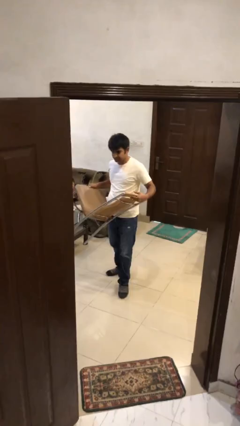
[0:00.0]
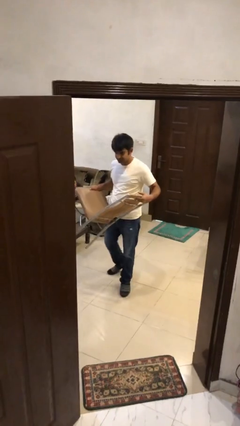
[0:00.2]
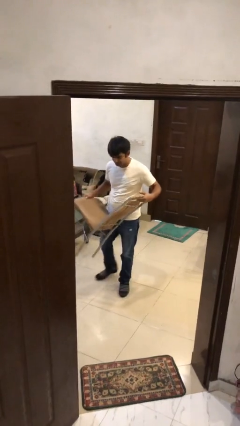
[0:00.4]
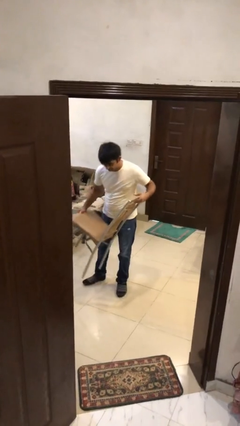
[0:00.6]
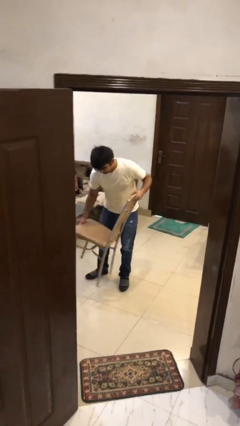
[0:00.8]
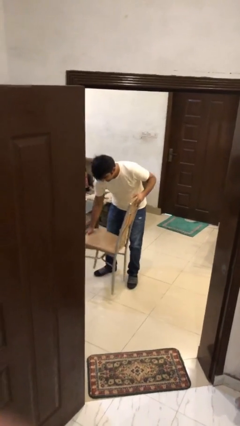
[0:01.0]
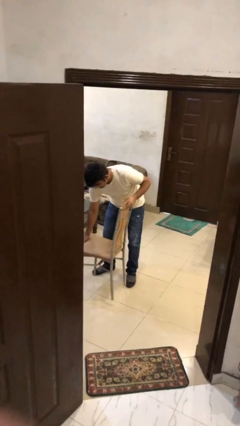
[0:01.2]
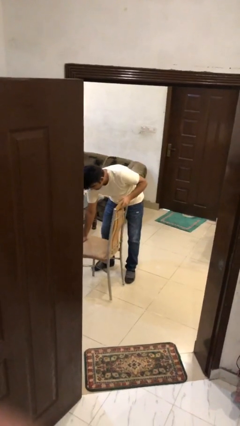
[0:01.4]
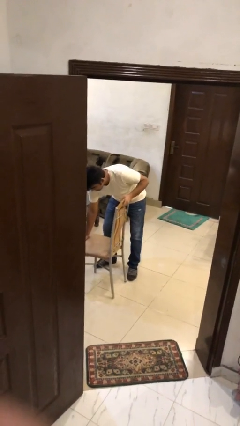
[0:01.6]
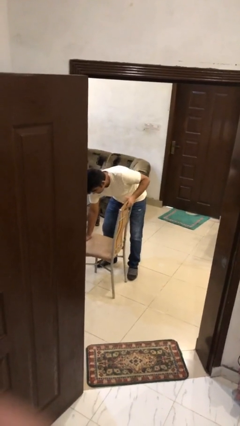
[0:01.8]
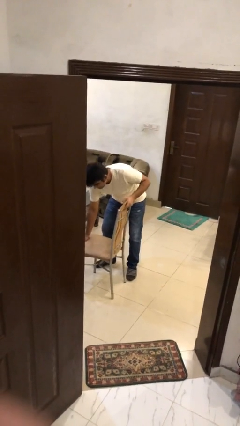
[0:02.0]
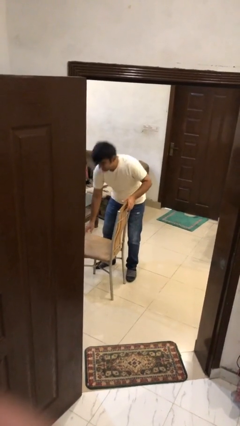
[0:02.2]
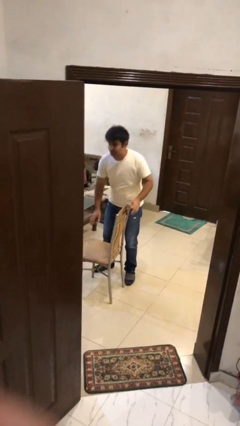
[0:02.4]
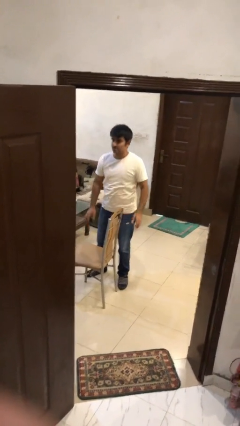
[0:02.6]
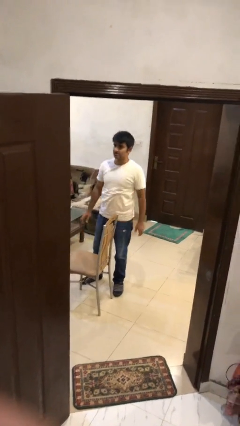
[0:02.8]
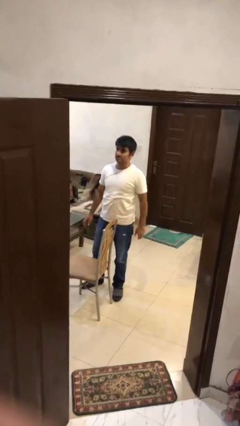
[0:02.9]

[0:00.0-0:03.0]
person puts down object on floor

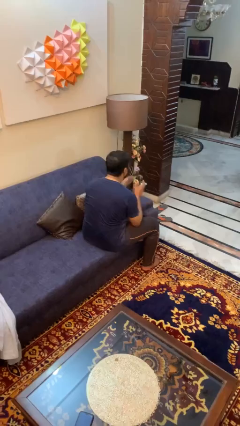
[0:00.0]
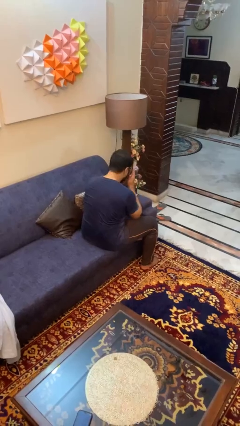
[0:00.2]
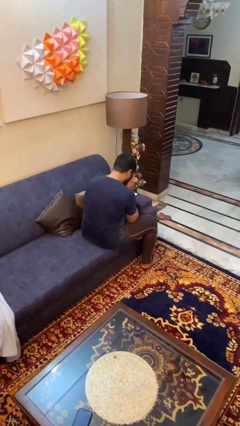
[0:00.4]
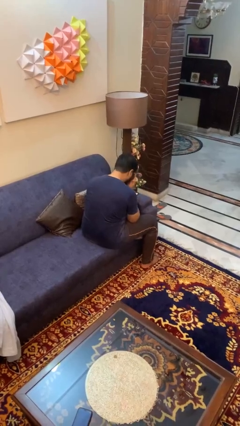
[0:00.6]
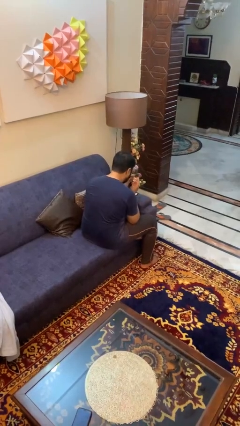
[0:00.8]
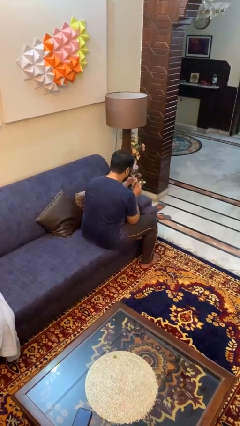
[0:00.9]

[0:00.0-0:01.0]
person sneezes into hand

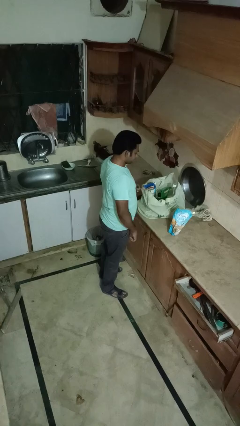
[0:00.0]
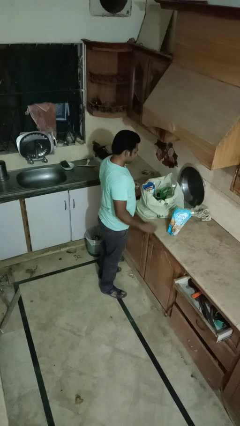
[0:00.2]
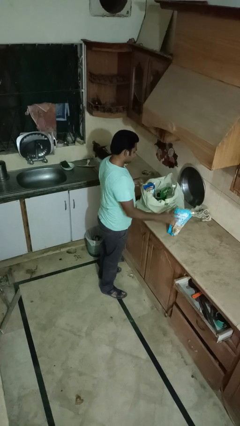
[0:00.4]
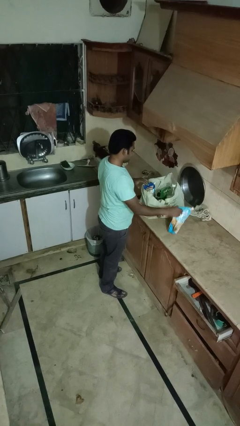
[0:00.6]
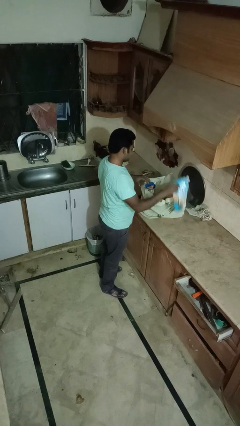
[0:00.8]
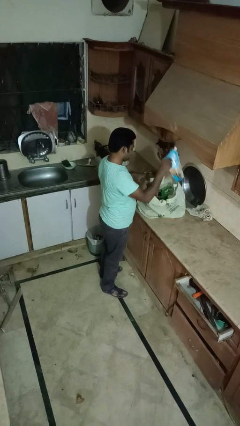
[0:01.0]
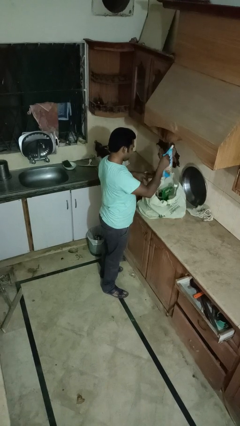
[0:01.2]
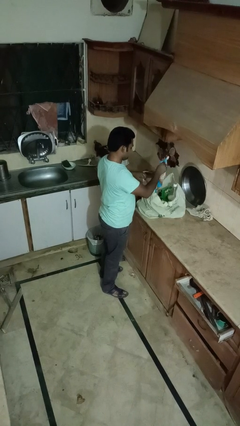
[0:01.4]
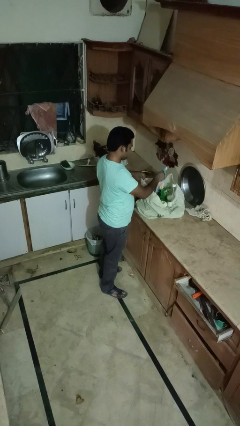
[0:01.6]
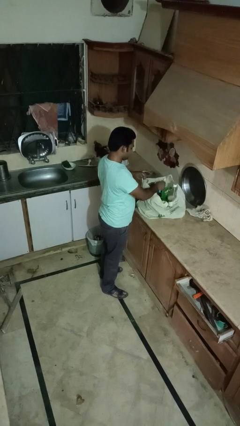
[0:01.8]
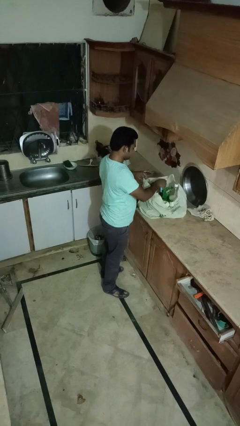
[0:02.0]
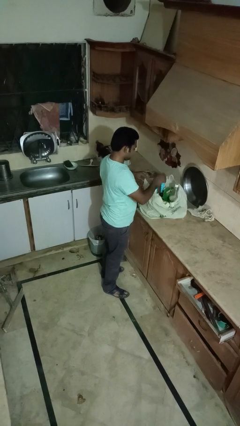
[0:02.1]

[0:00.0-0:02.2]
person puts object into bag

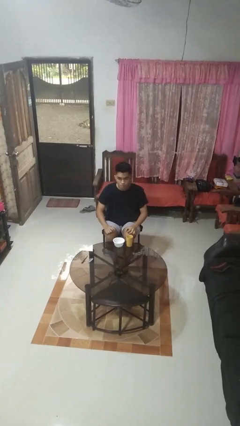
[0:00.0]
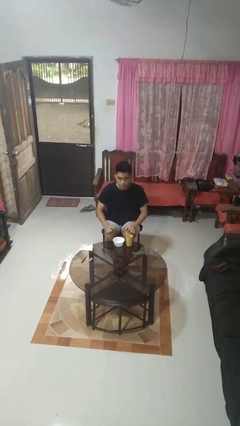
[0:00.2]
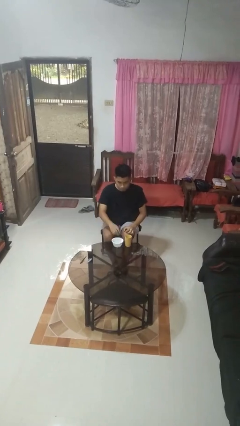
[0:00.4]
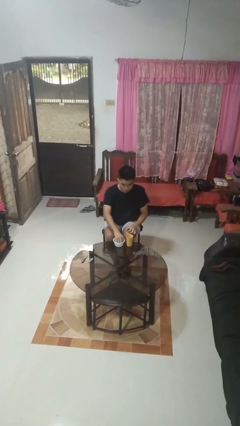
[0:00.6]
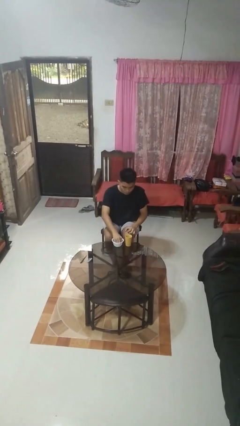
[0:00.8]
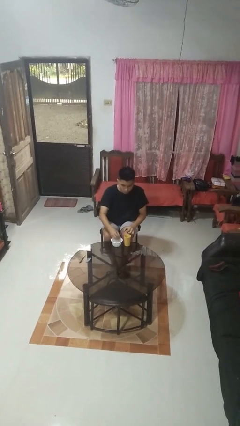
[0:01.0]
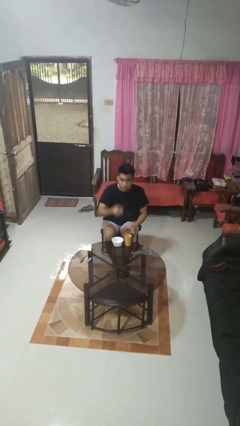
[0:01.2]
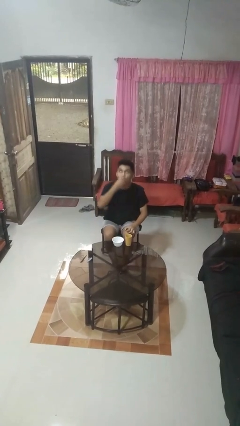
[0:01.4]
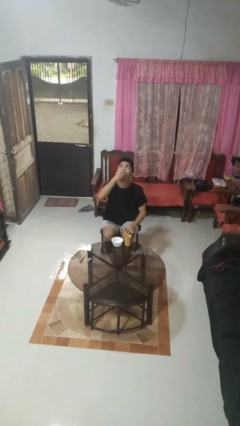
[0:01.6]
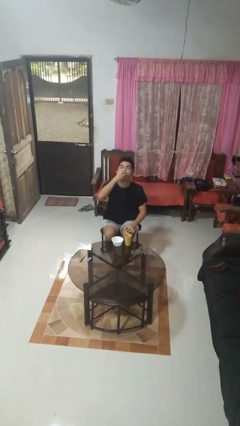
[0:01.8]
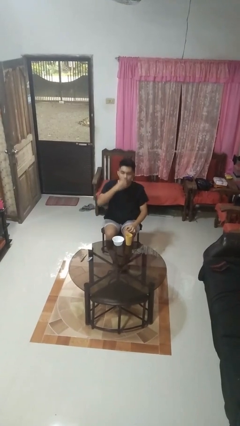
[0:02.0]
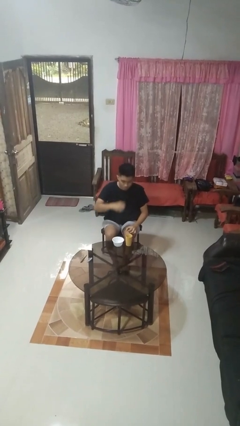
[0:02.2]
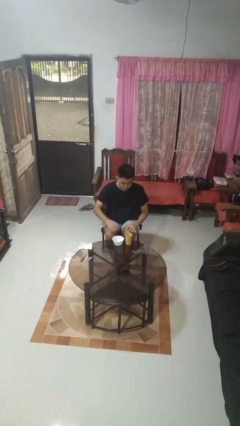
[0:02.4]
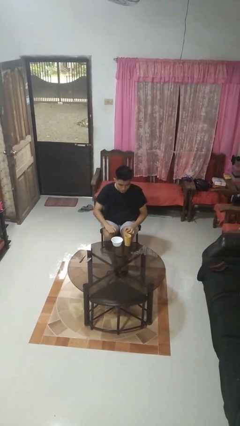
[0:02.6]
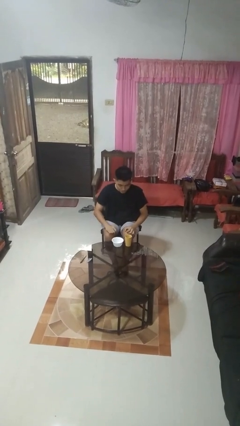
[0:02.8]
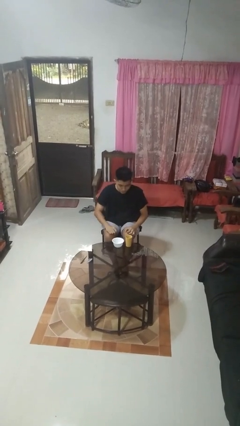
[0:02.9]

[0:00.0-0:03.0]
person takes medicine pills

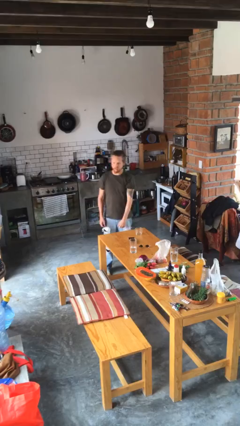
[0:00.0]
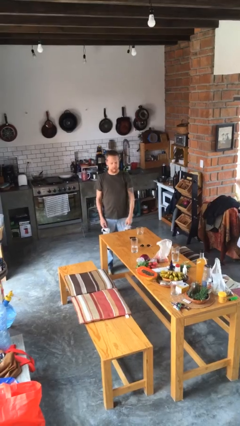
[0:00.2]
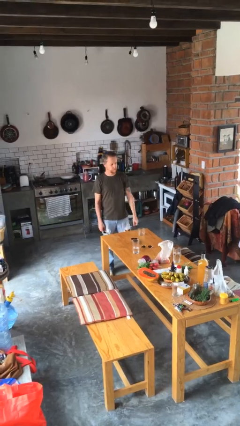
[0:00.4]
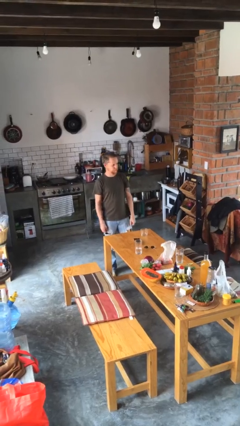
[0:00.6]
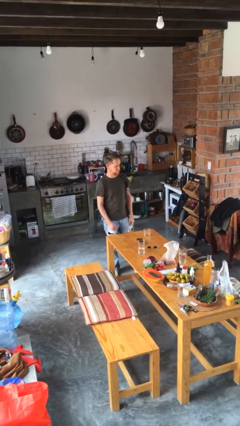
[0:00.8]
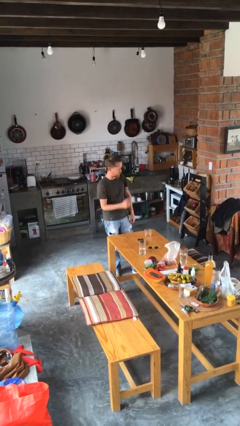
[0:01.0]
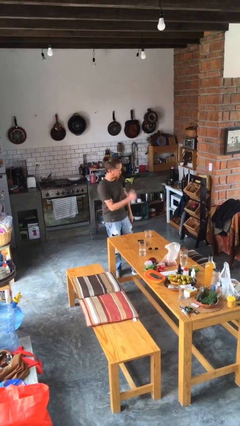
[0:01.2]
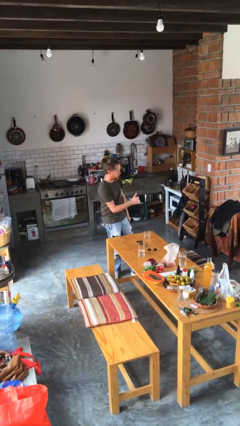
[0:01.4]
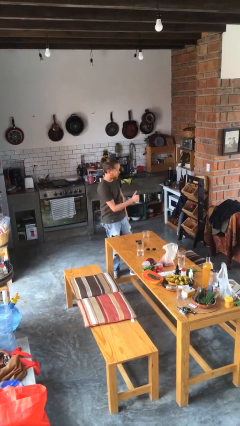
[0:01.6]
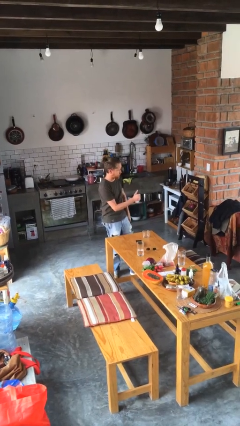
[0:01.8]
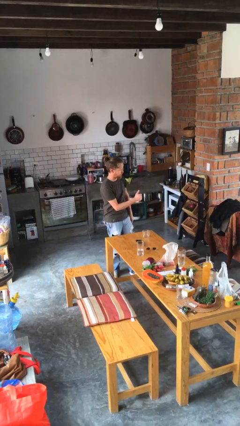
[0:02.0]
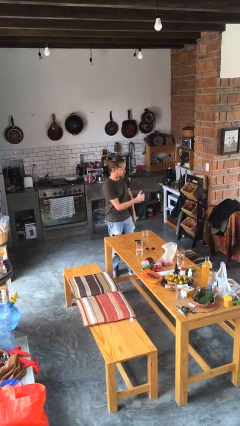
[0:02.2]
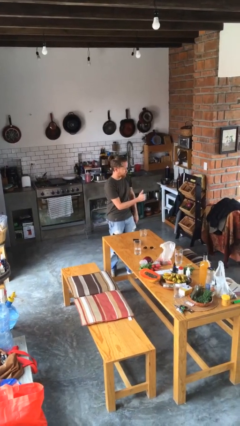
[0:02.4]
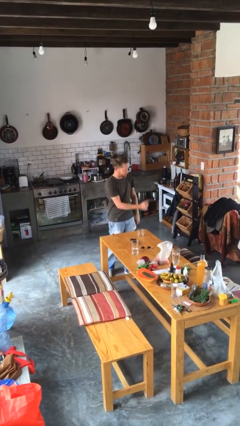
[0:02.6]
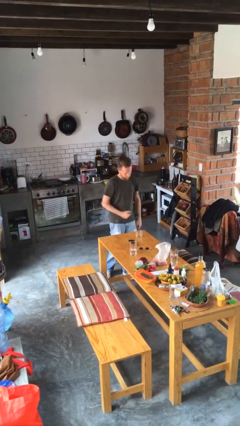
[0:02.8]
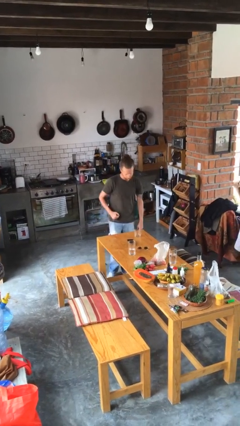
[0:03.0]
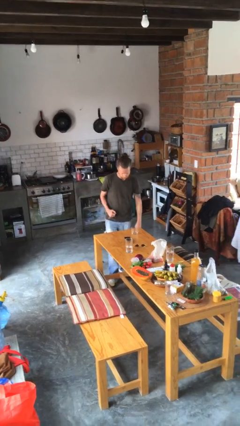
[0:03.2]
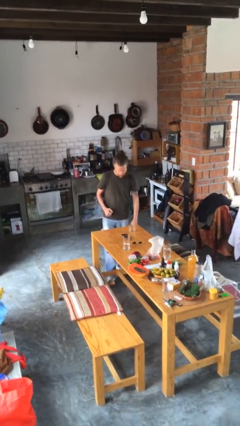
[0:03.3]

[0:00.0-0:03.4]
person gestures thumbs up

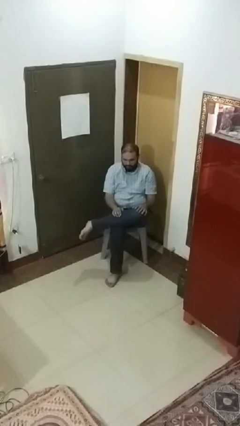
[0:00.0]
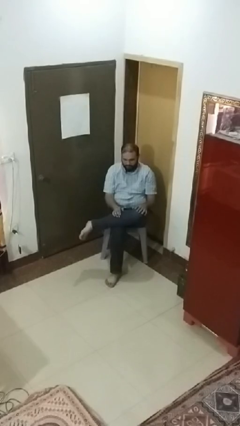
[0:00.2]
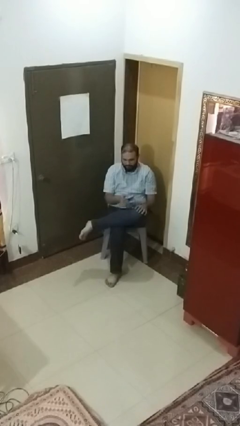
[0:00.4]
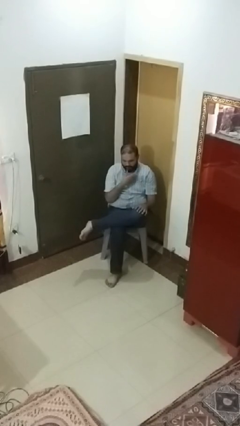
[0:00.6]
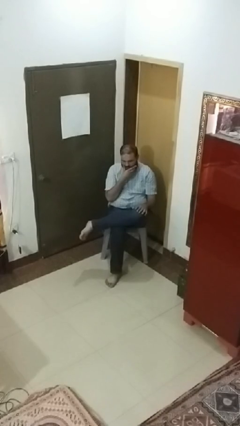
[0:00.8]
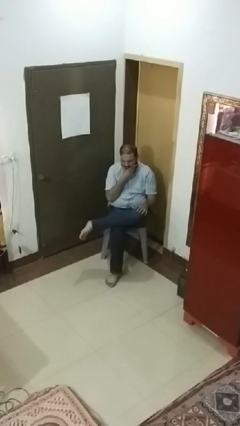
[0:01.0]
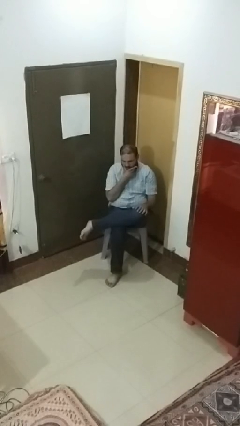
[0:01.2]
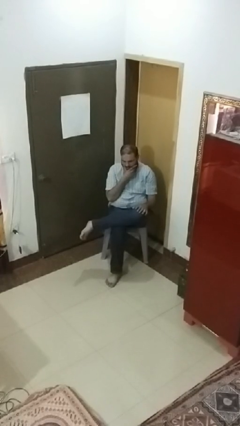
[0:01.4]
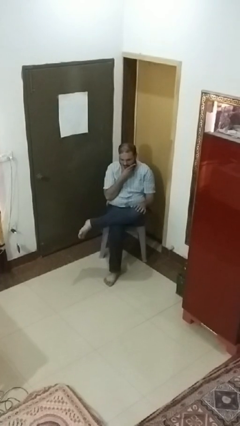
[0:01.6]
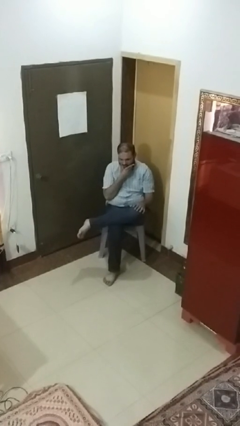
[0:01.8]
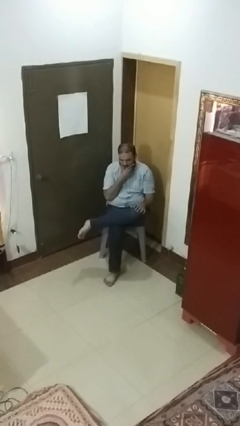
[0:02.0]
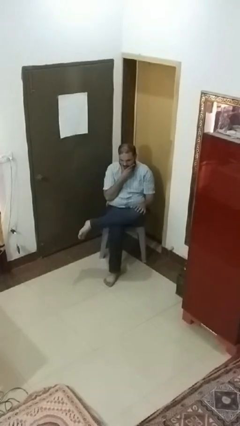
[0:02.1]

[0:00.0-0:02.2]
person strokes chin

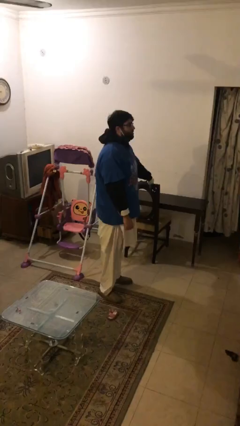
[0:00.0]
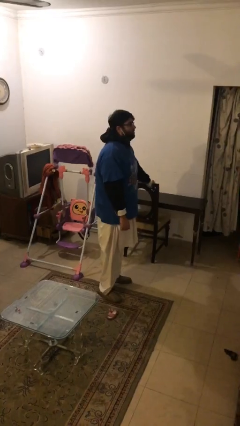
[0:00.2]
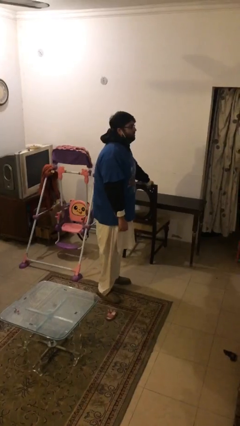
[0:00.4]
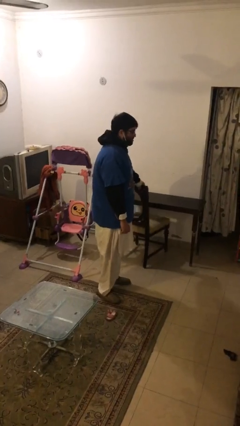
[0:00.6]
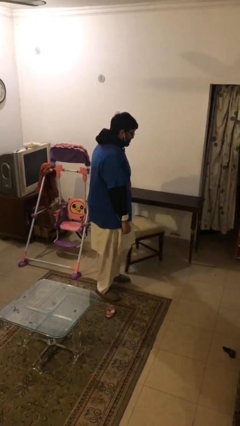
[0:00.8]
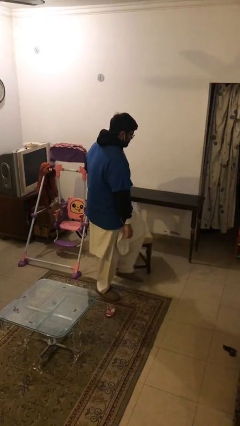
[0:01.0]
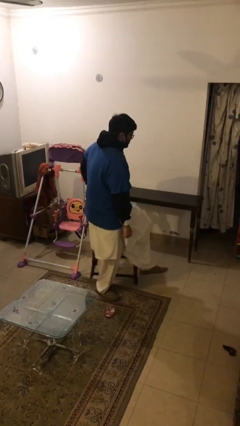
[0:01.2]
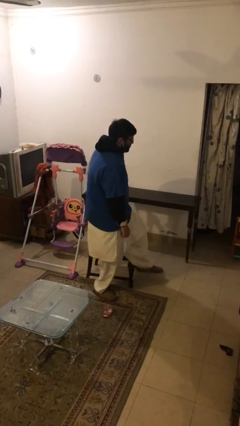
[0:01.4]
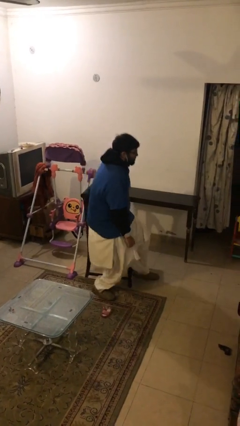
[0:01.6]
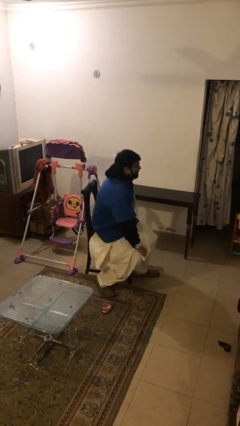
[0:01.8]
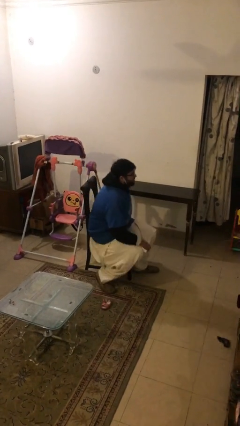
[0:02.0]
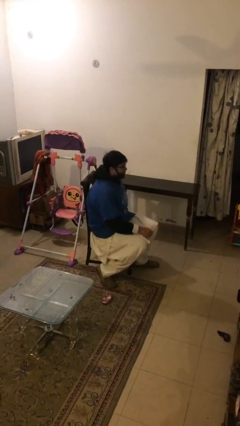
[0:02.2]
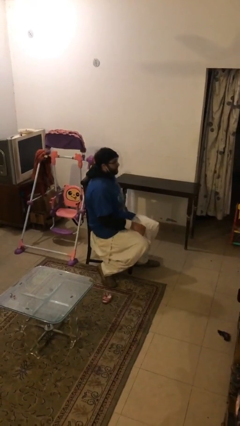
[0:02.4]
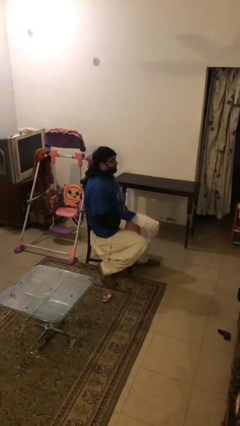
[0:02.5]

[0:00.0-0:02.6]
person sits down
